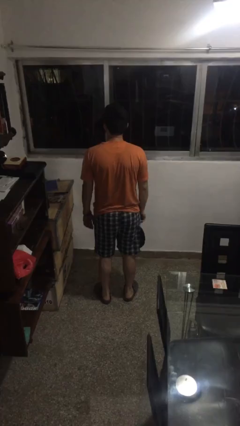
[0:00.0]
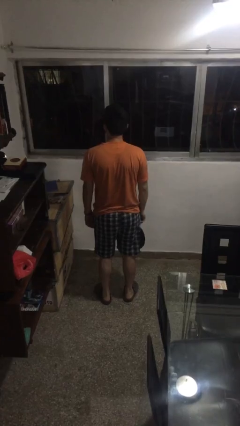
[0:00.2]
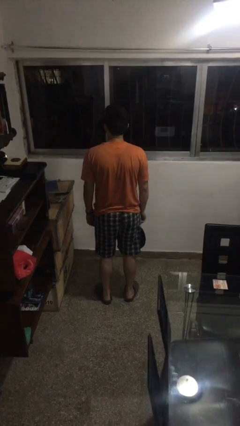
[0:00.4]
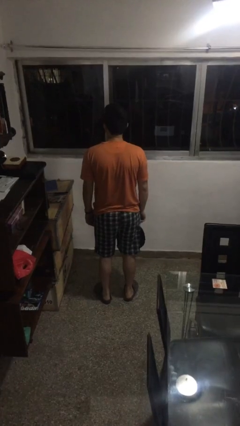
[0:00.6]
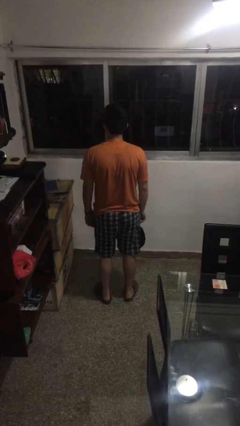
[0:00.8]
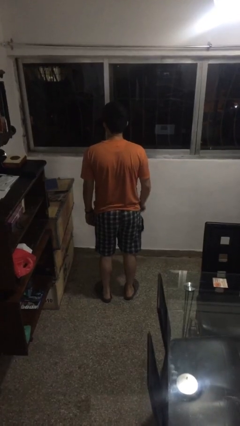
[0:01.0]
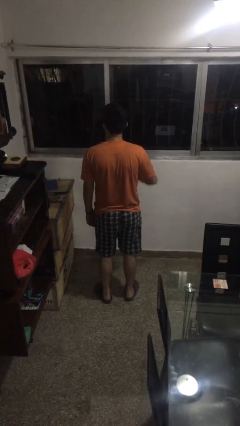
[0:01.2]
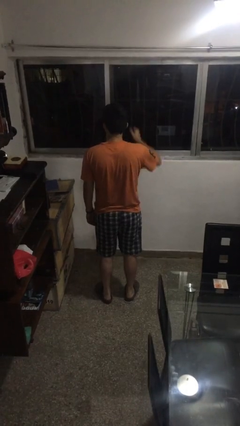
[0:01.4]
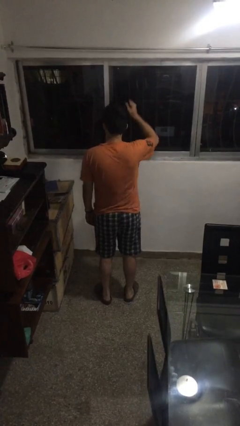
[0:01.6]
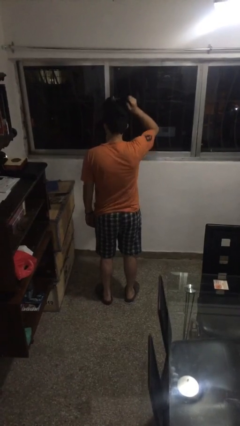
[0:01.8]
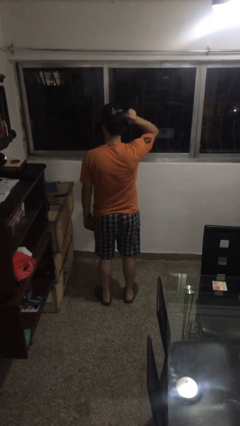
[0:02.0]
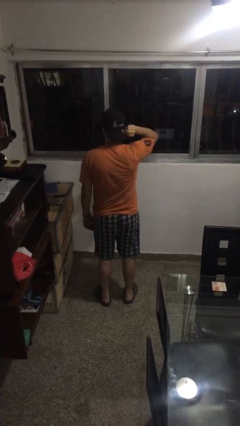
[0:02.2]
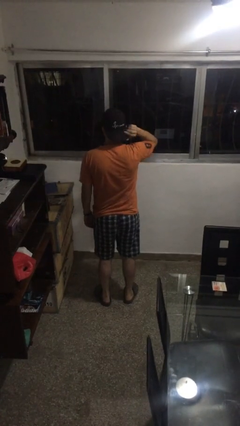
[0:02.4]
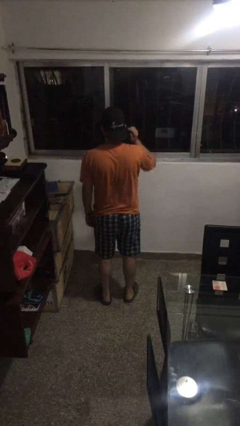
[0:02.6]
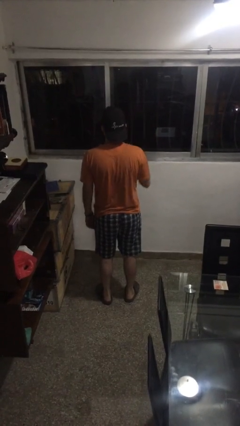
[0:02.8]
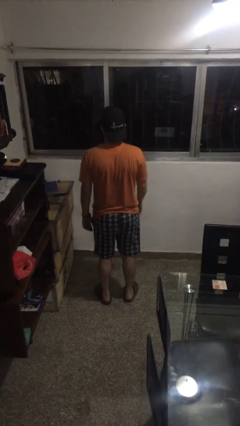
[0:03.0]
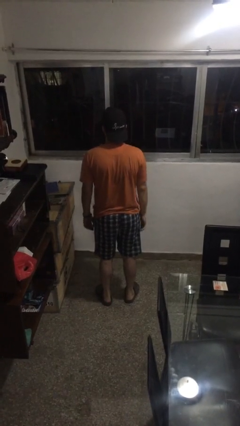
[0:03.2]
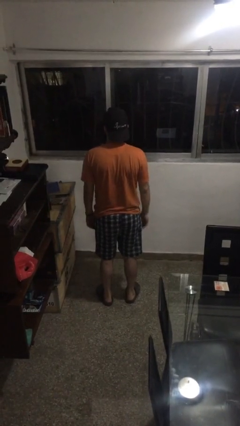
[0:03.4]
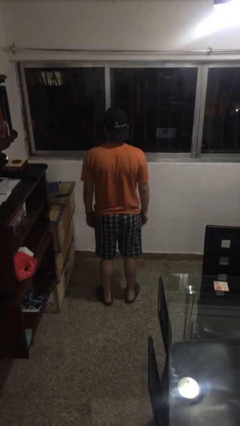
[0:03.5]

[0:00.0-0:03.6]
person puts on hat

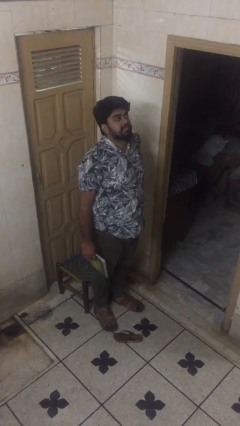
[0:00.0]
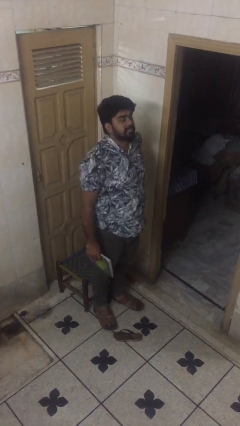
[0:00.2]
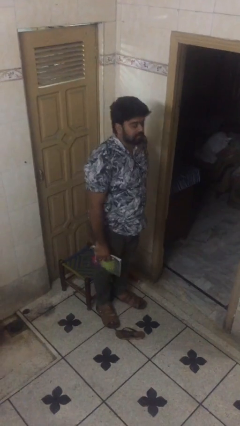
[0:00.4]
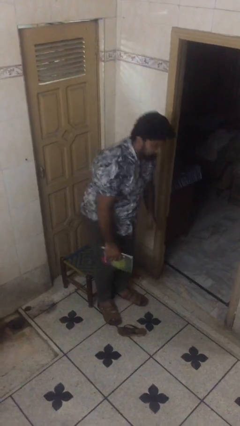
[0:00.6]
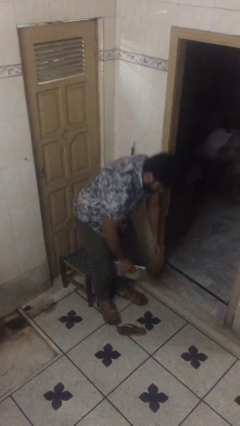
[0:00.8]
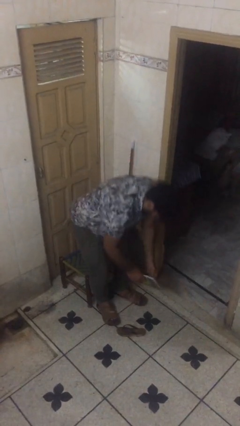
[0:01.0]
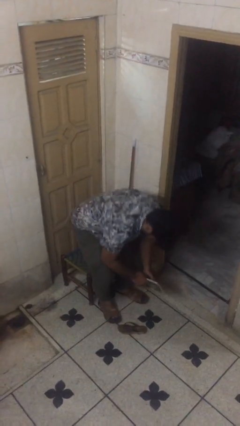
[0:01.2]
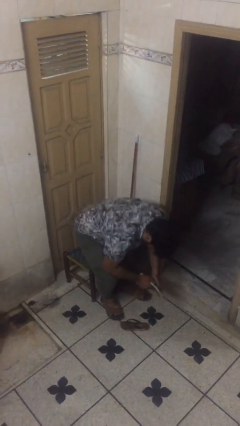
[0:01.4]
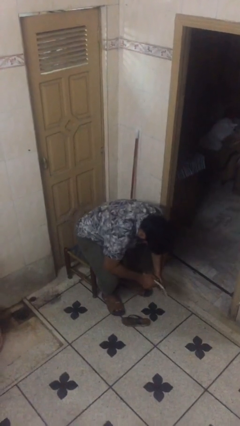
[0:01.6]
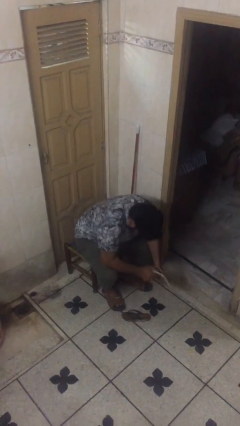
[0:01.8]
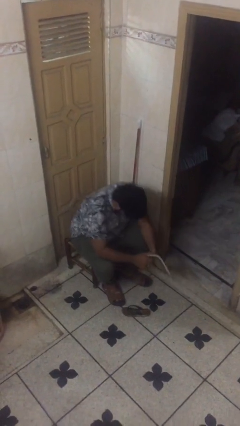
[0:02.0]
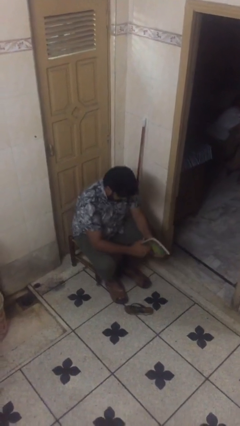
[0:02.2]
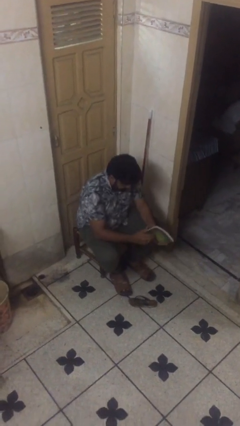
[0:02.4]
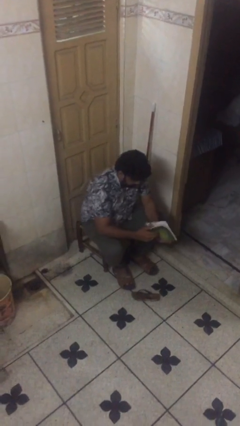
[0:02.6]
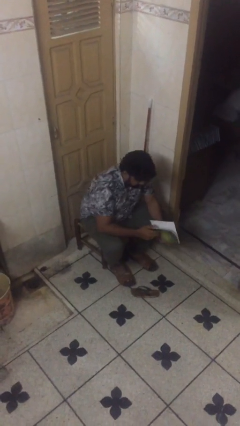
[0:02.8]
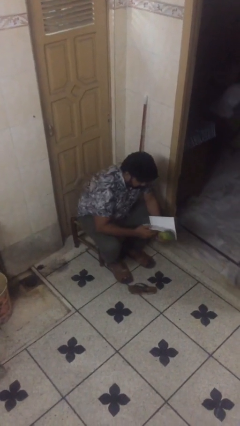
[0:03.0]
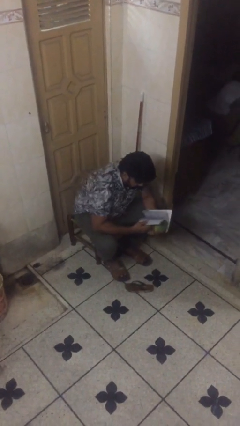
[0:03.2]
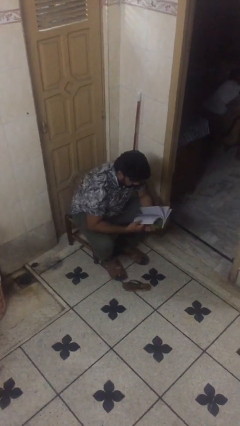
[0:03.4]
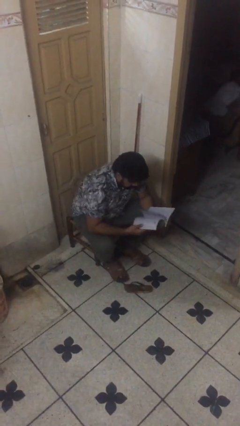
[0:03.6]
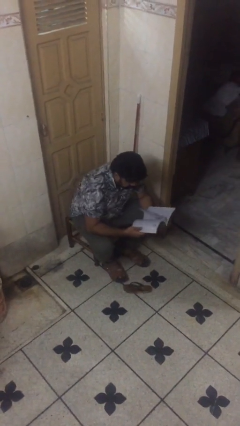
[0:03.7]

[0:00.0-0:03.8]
person sits down

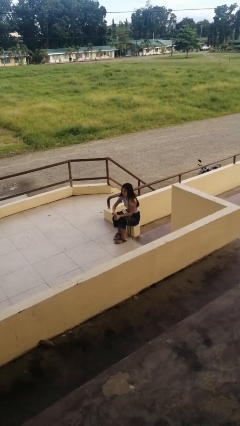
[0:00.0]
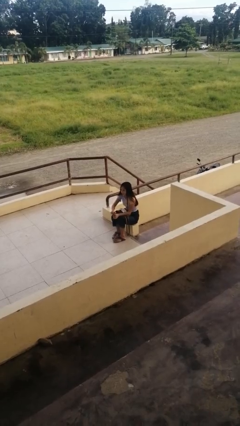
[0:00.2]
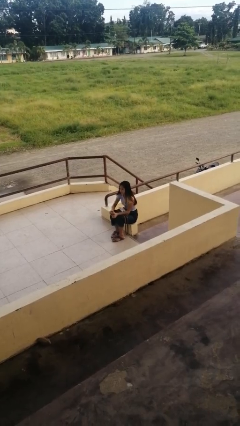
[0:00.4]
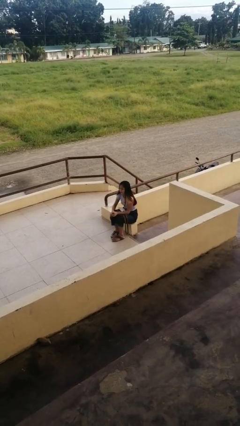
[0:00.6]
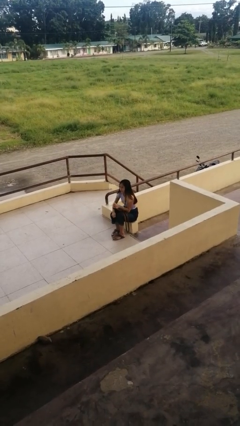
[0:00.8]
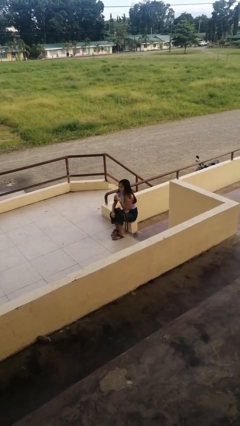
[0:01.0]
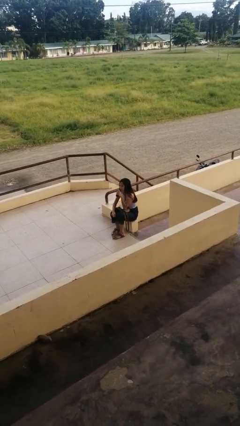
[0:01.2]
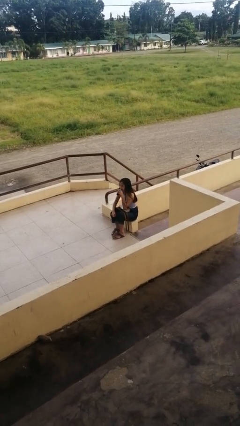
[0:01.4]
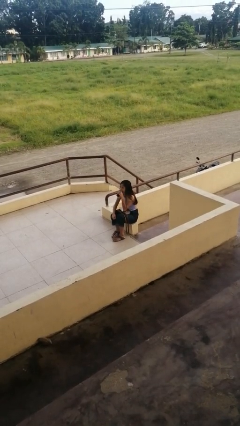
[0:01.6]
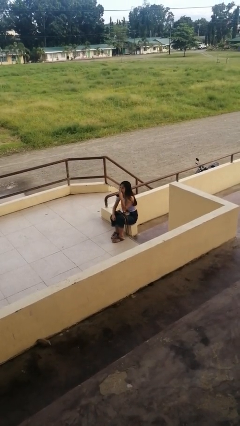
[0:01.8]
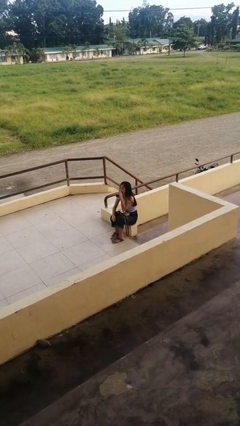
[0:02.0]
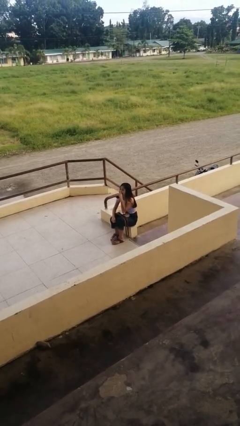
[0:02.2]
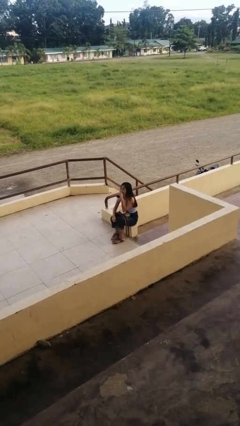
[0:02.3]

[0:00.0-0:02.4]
person drinks from beverage can

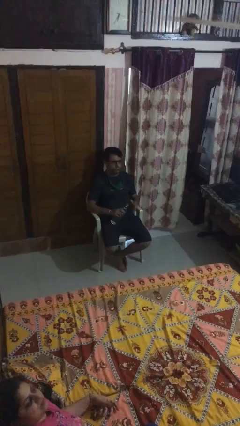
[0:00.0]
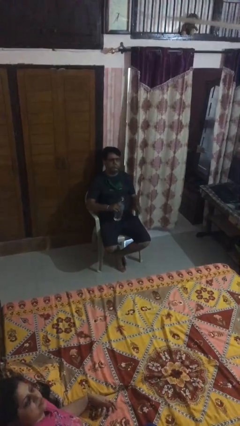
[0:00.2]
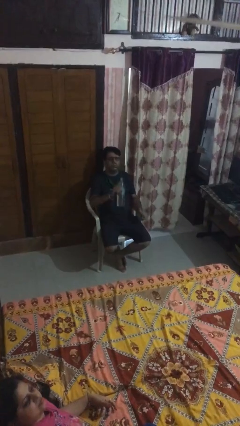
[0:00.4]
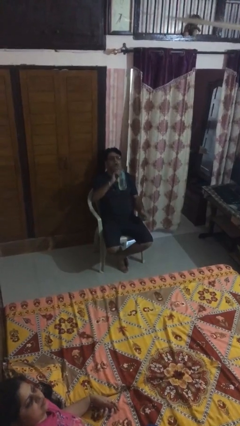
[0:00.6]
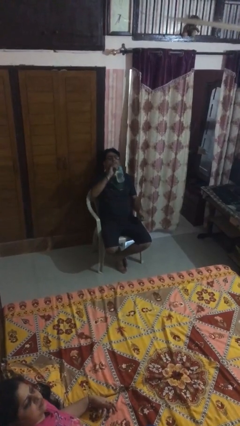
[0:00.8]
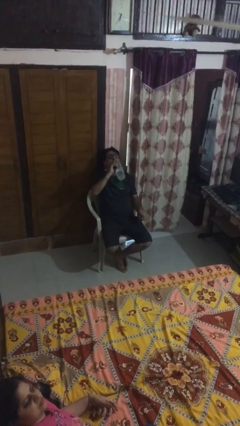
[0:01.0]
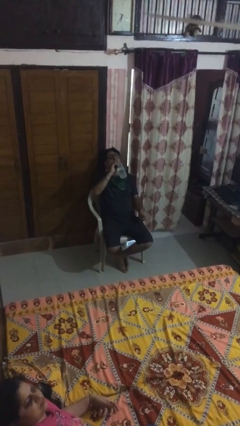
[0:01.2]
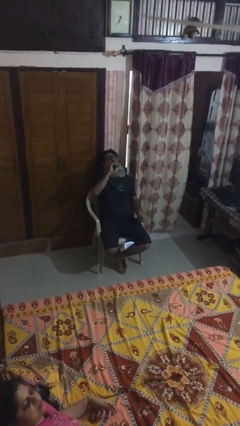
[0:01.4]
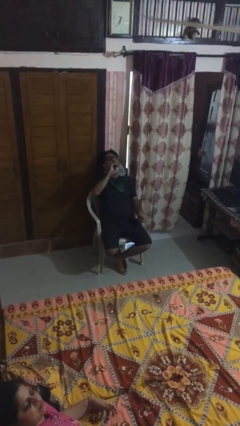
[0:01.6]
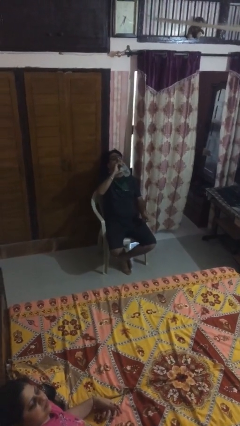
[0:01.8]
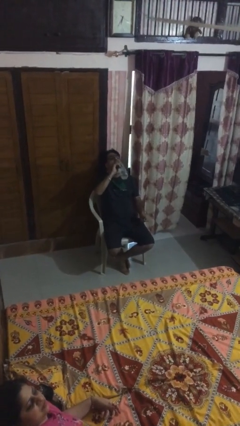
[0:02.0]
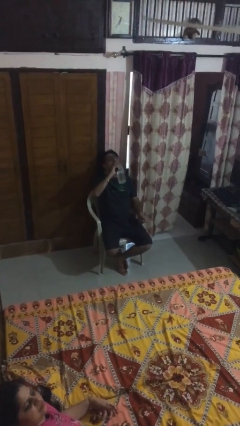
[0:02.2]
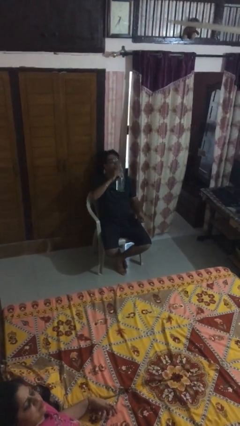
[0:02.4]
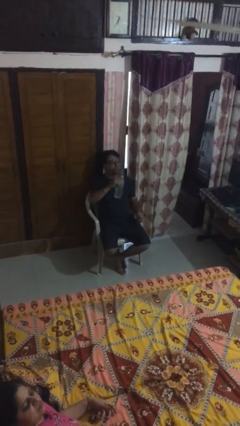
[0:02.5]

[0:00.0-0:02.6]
person drinks from bottle

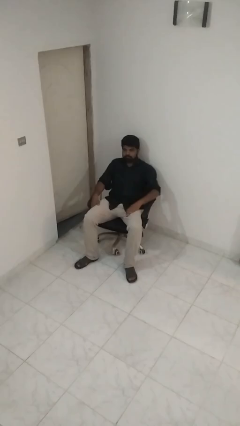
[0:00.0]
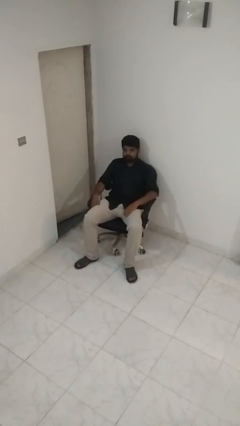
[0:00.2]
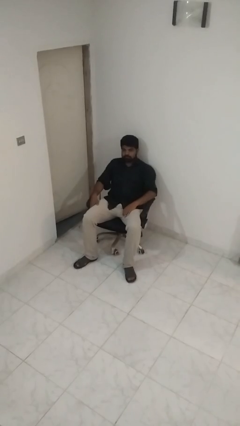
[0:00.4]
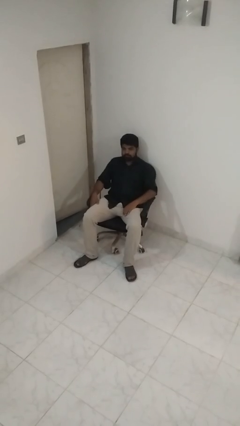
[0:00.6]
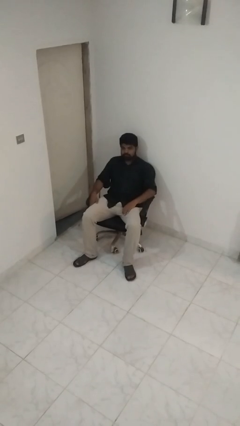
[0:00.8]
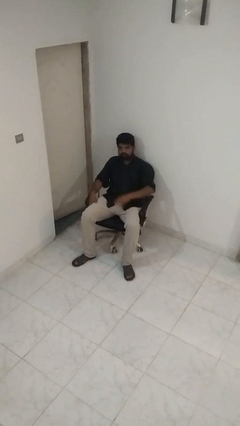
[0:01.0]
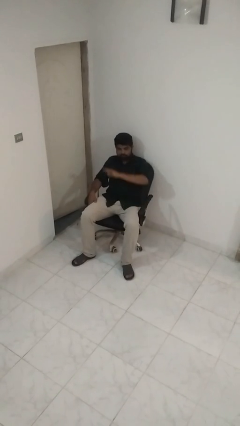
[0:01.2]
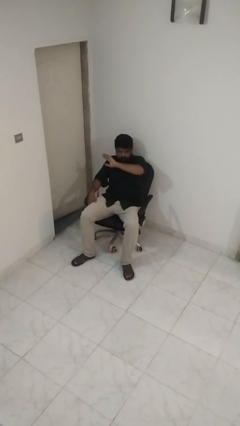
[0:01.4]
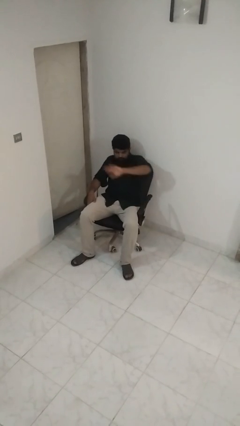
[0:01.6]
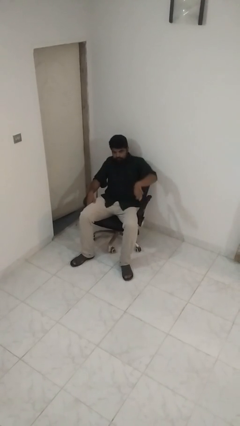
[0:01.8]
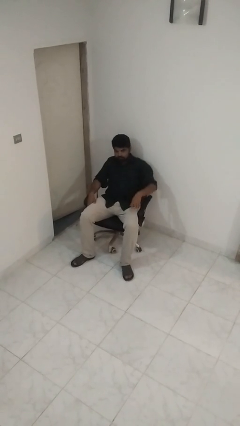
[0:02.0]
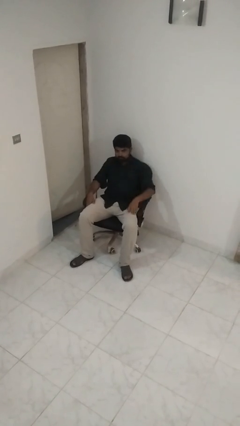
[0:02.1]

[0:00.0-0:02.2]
person gestures swipe left

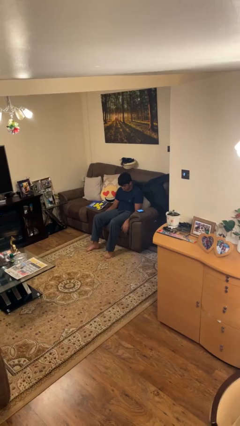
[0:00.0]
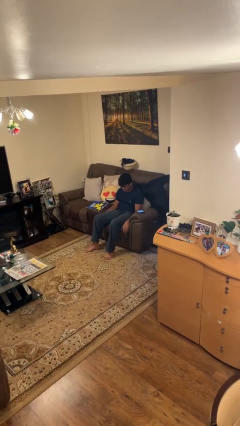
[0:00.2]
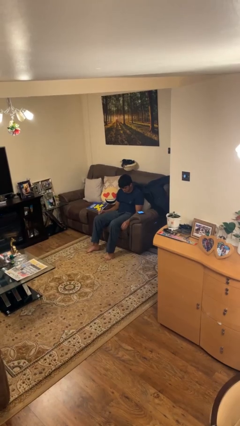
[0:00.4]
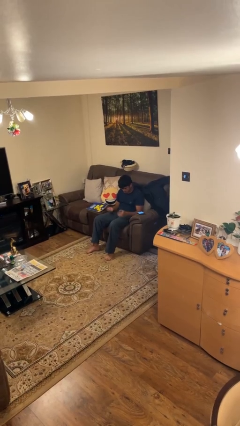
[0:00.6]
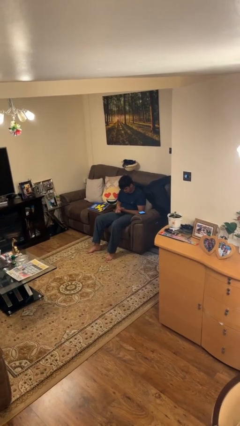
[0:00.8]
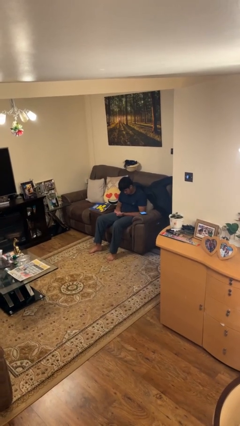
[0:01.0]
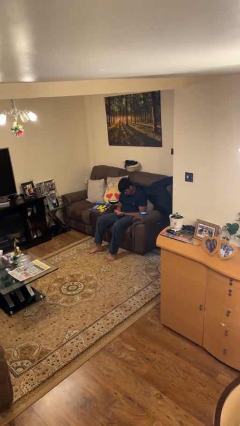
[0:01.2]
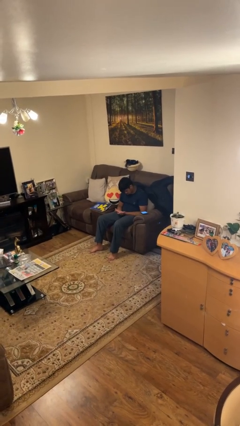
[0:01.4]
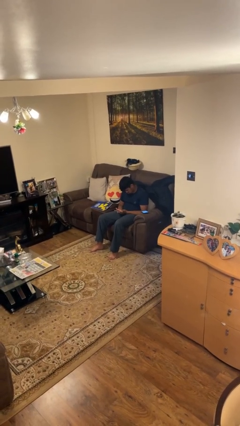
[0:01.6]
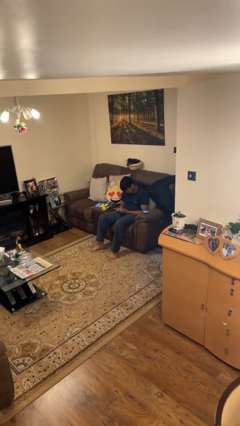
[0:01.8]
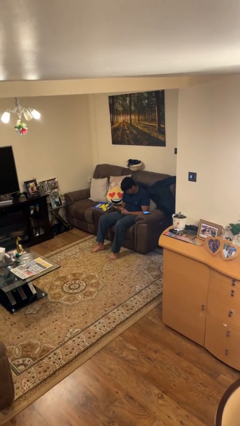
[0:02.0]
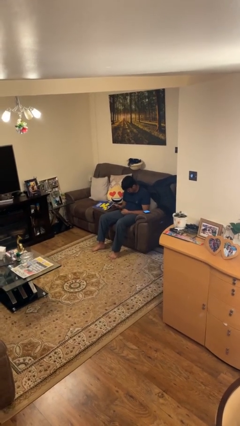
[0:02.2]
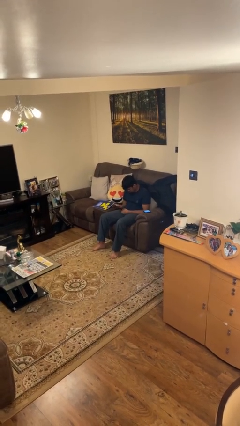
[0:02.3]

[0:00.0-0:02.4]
person looks at hands in lap

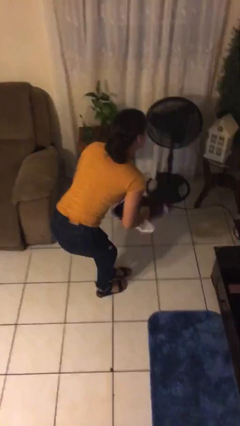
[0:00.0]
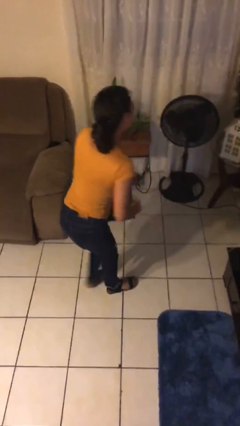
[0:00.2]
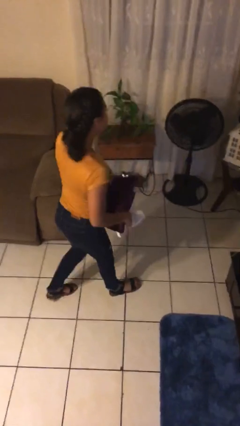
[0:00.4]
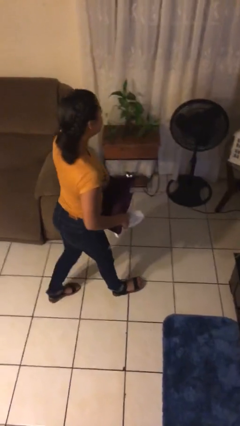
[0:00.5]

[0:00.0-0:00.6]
person picks up object from floor
